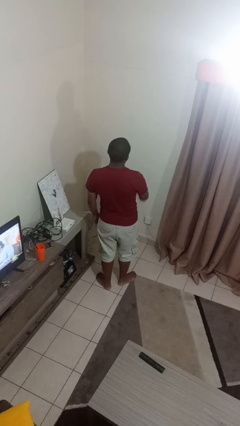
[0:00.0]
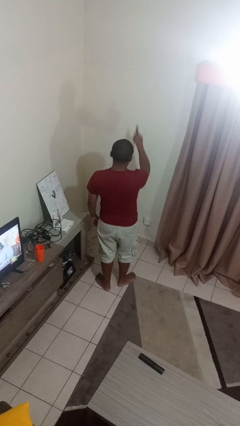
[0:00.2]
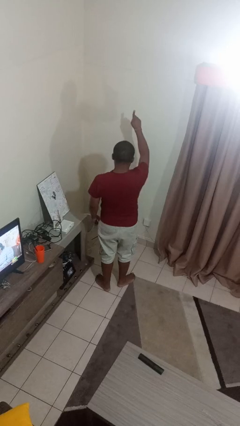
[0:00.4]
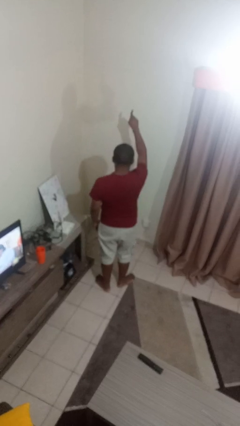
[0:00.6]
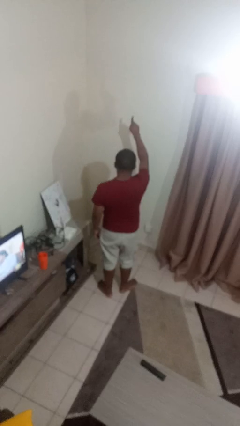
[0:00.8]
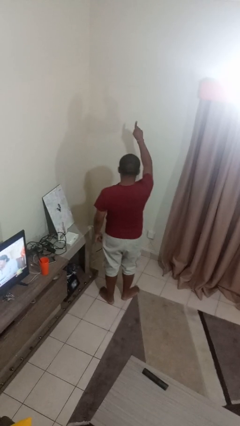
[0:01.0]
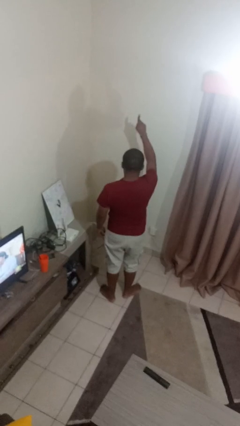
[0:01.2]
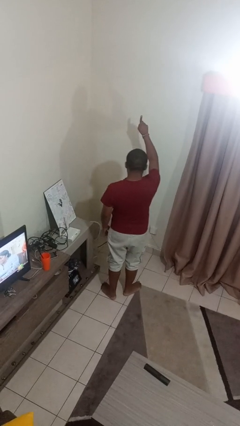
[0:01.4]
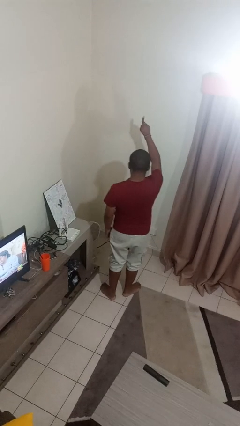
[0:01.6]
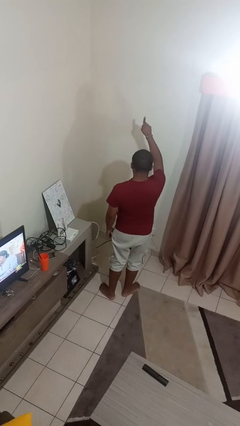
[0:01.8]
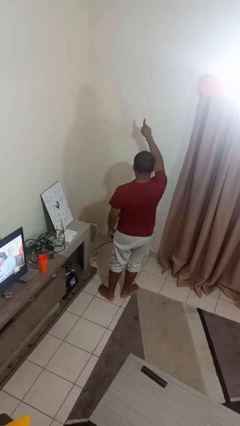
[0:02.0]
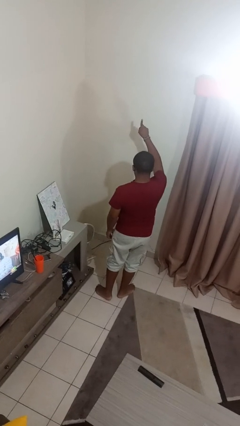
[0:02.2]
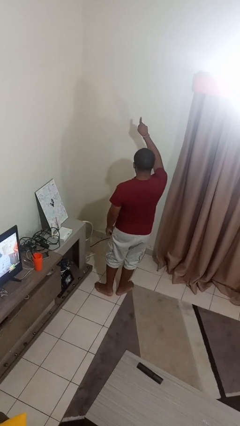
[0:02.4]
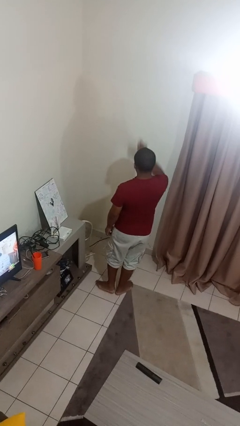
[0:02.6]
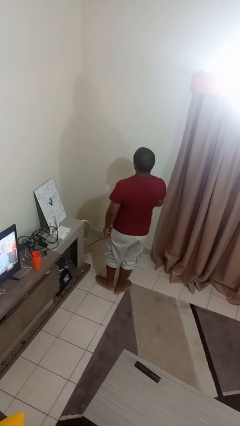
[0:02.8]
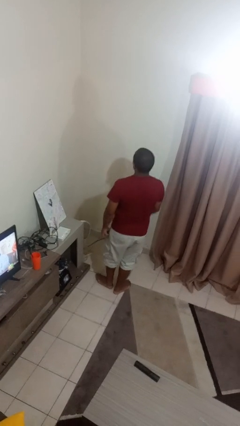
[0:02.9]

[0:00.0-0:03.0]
person gestures number one

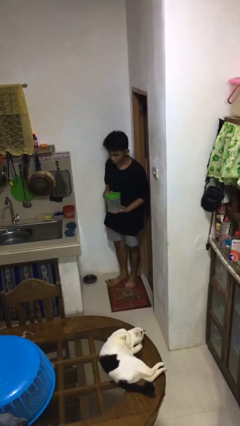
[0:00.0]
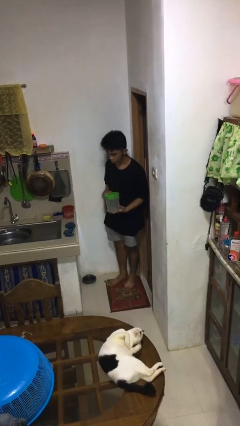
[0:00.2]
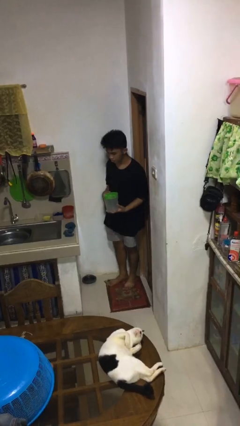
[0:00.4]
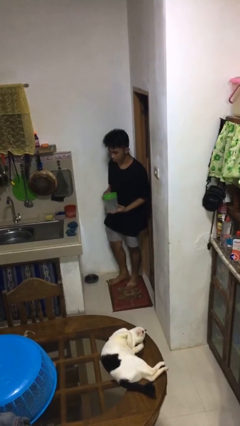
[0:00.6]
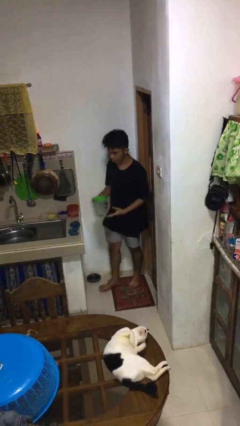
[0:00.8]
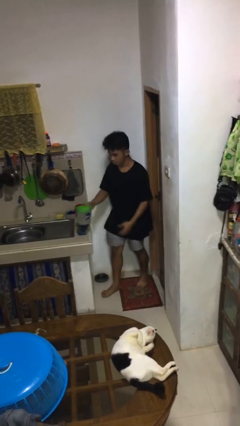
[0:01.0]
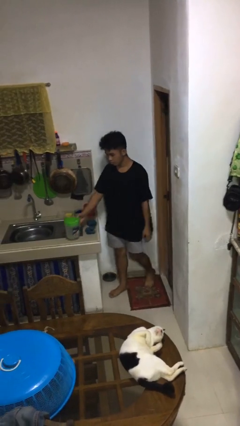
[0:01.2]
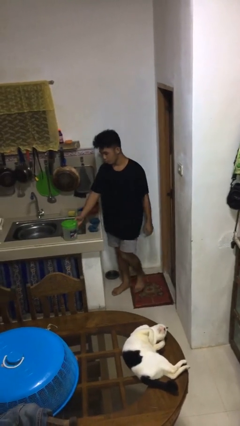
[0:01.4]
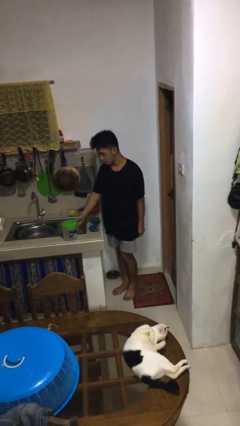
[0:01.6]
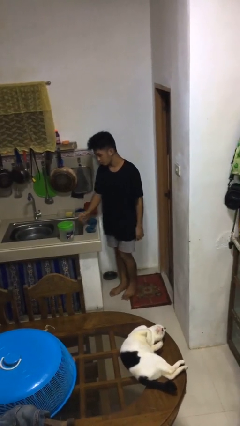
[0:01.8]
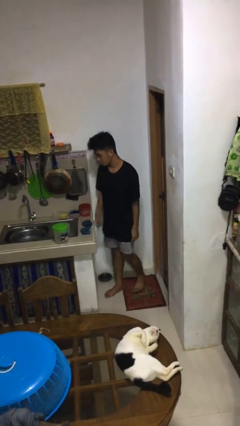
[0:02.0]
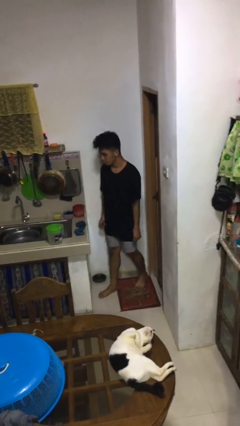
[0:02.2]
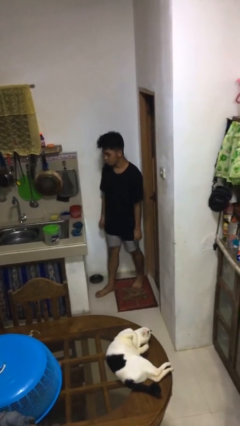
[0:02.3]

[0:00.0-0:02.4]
person puts down object on countertop

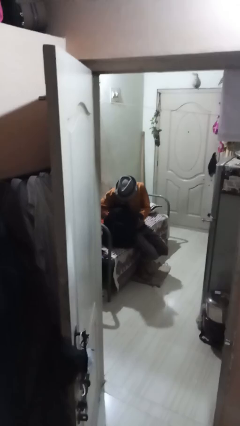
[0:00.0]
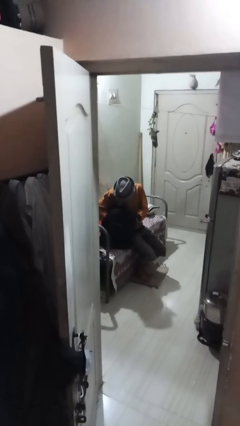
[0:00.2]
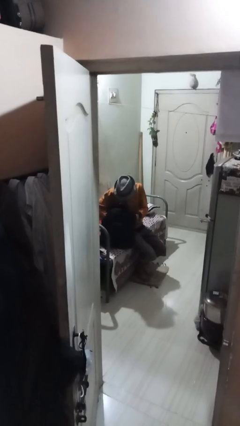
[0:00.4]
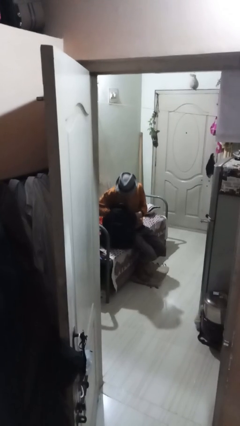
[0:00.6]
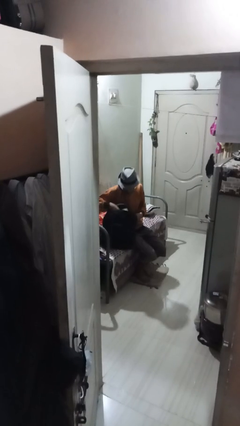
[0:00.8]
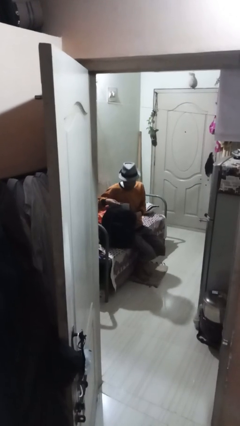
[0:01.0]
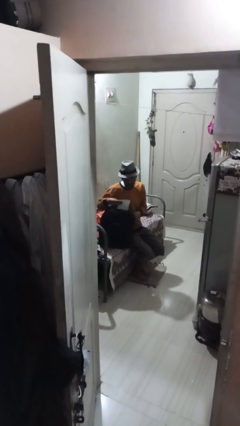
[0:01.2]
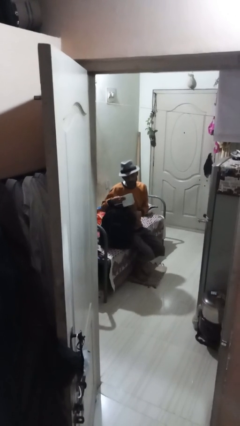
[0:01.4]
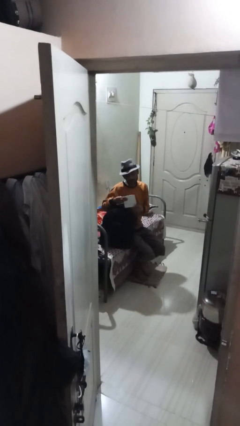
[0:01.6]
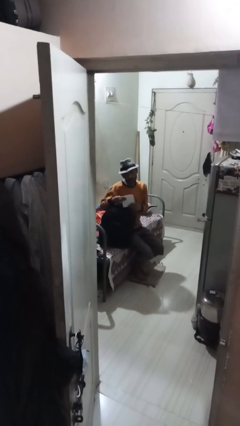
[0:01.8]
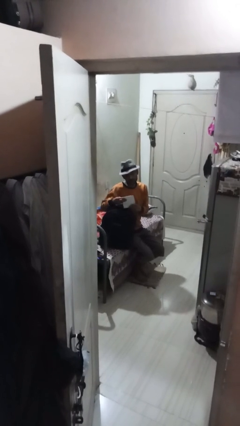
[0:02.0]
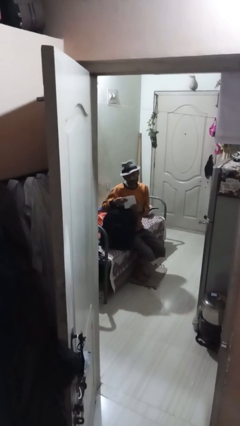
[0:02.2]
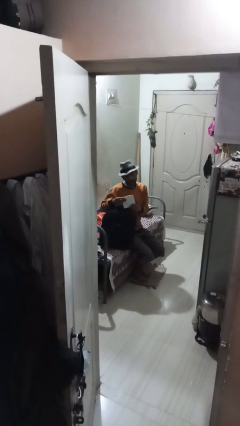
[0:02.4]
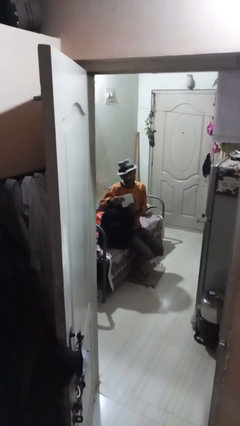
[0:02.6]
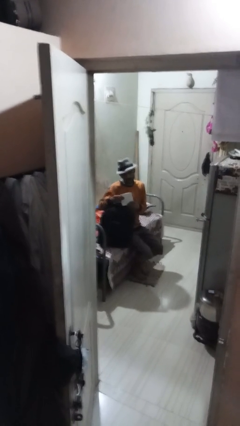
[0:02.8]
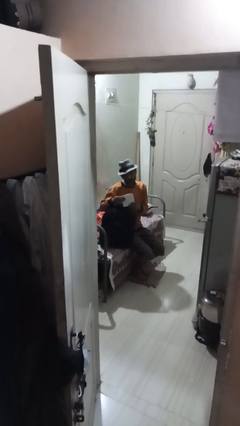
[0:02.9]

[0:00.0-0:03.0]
person takes object from backpack

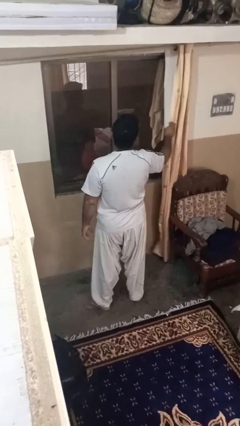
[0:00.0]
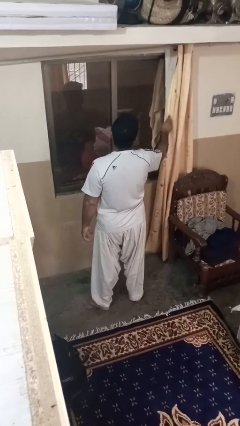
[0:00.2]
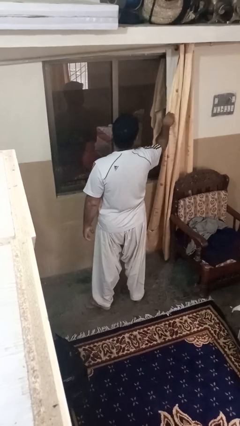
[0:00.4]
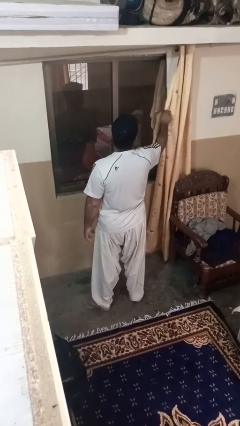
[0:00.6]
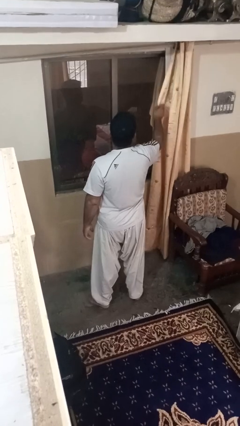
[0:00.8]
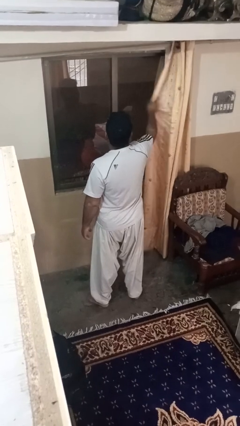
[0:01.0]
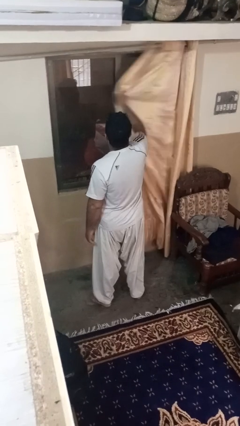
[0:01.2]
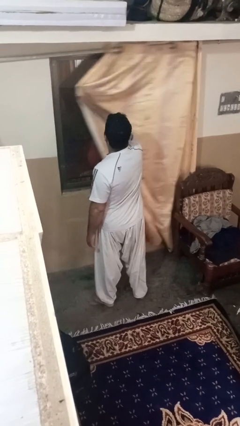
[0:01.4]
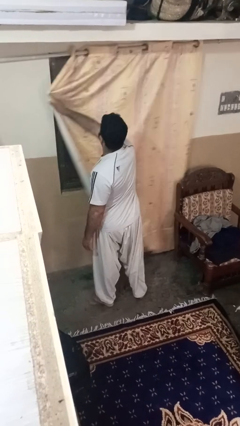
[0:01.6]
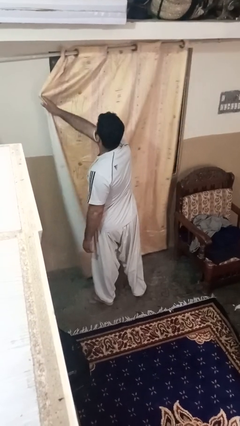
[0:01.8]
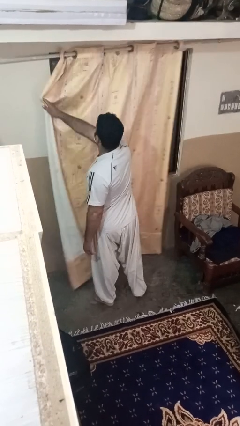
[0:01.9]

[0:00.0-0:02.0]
person closes curtains

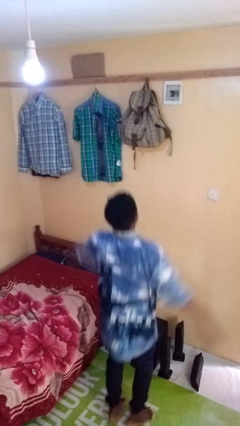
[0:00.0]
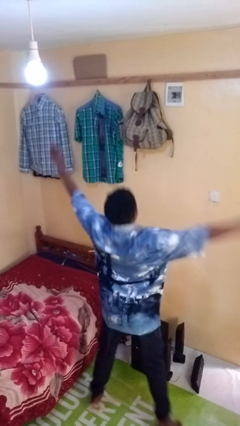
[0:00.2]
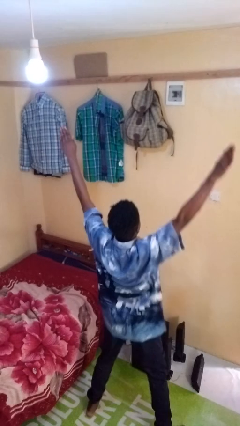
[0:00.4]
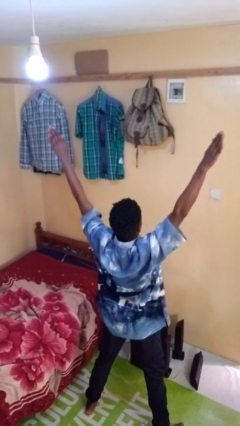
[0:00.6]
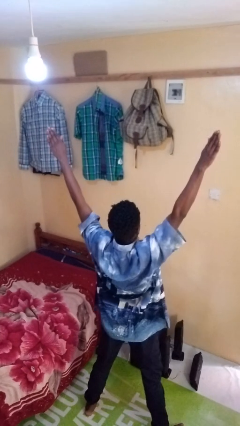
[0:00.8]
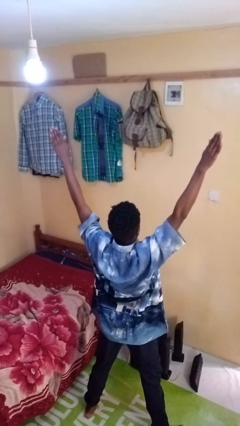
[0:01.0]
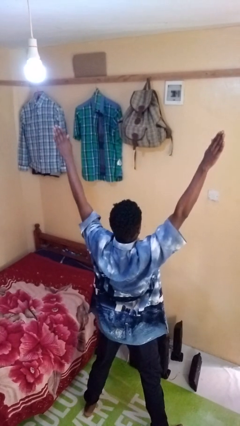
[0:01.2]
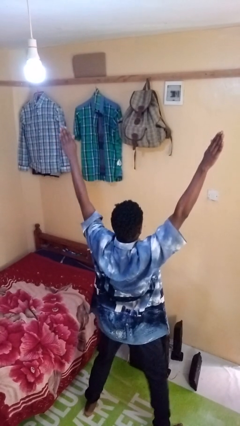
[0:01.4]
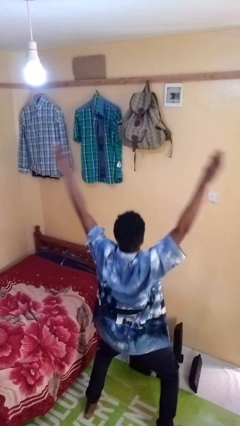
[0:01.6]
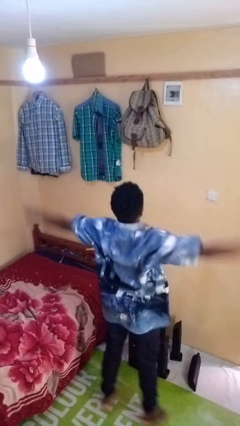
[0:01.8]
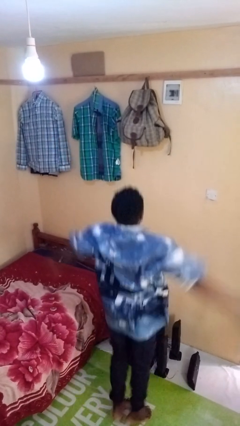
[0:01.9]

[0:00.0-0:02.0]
person exercises with jumping jacks

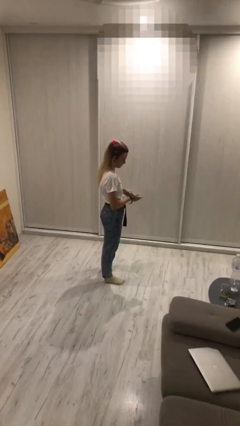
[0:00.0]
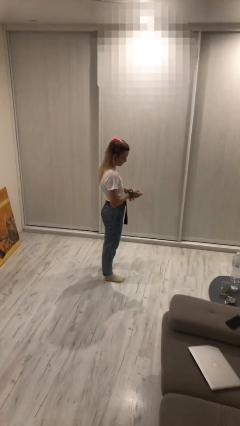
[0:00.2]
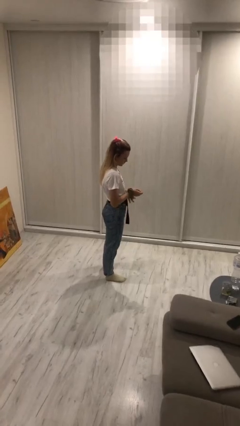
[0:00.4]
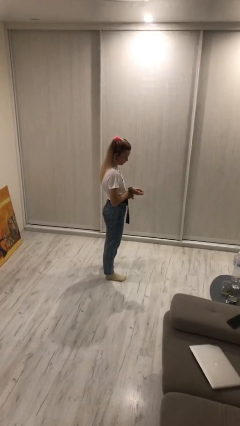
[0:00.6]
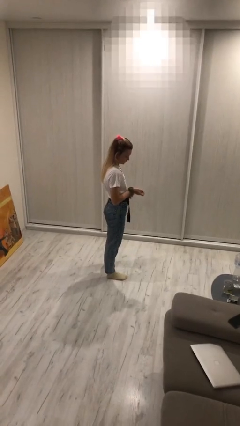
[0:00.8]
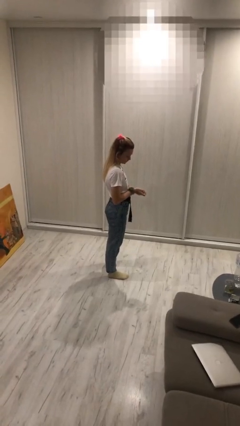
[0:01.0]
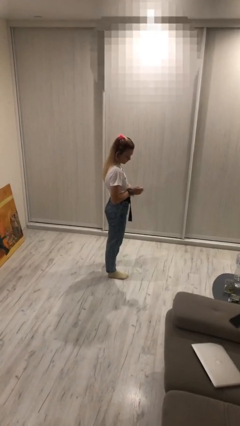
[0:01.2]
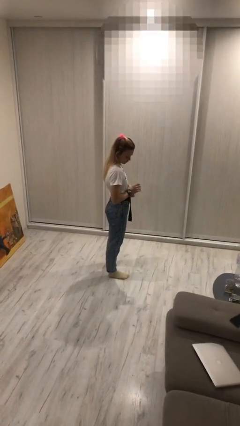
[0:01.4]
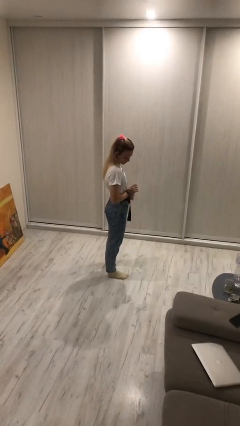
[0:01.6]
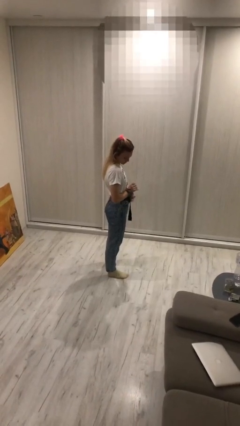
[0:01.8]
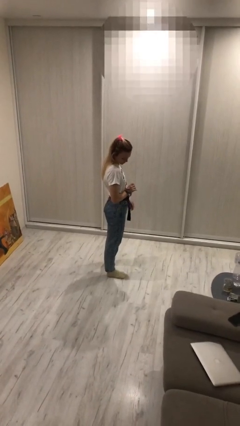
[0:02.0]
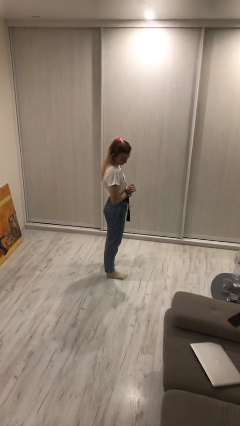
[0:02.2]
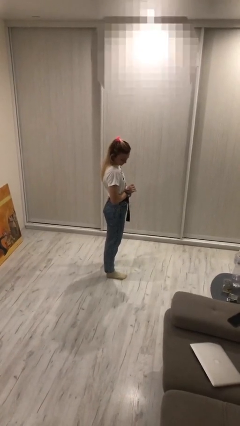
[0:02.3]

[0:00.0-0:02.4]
person puts on wristwatch

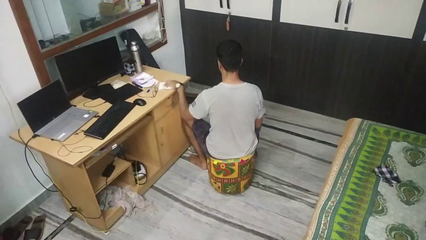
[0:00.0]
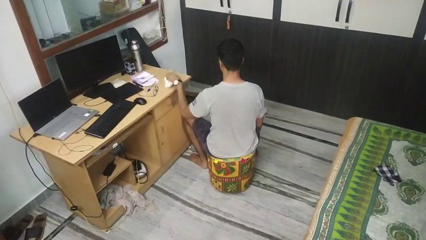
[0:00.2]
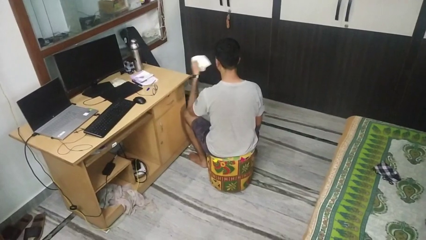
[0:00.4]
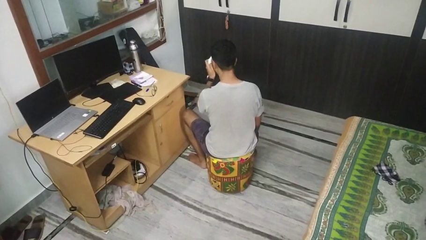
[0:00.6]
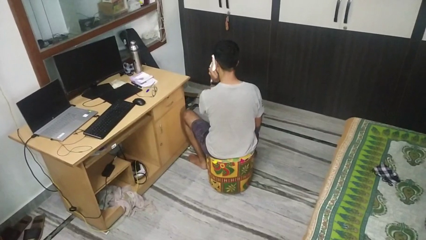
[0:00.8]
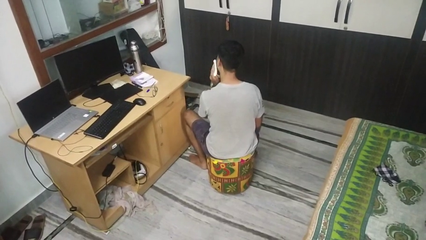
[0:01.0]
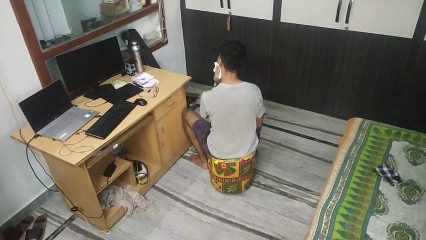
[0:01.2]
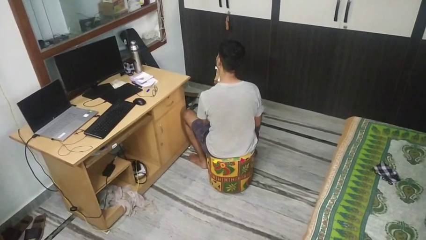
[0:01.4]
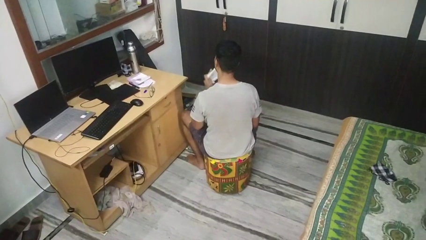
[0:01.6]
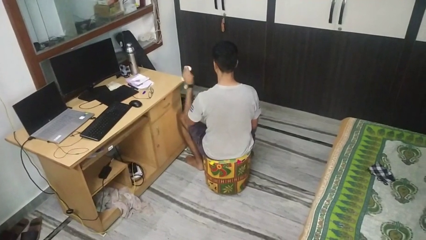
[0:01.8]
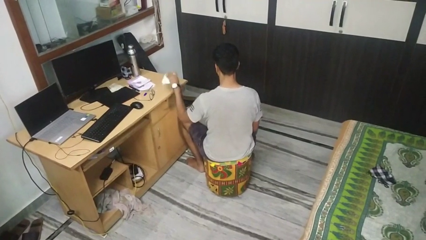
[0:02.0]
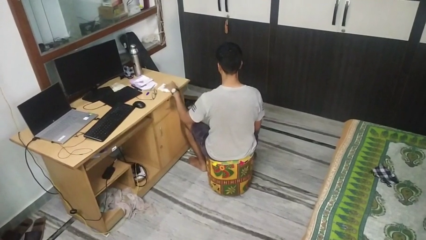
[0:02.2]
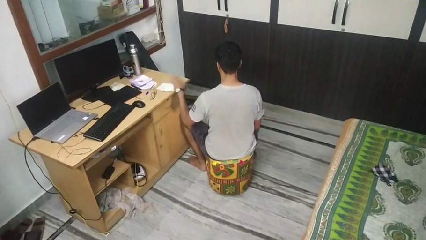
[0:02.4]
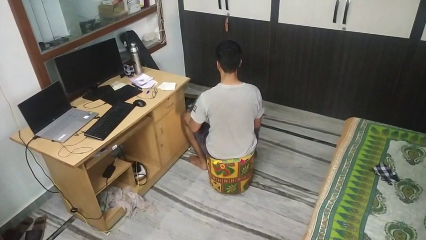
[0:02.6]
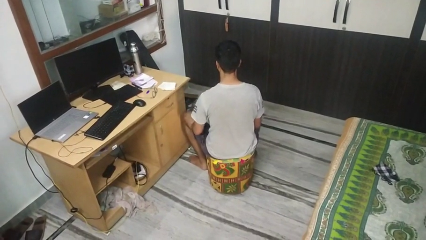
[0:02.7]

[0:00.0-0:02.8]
person wipes mouth with napkin
